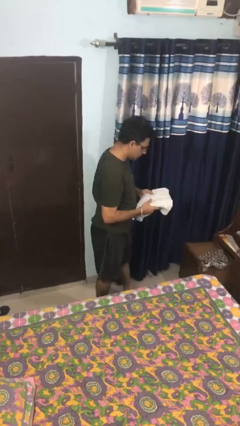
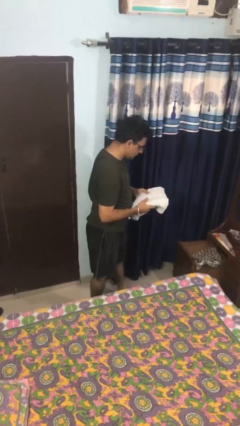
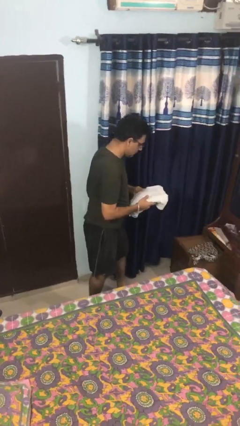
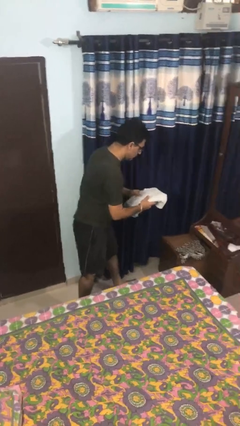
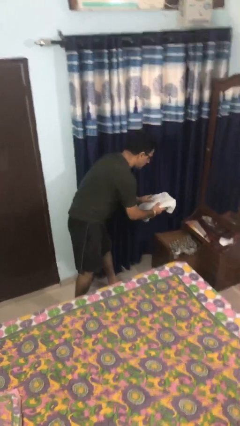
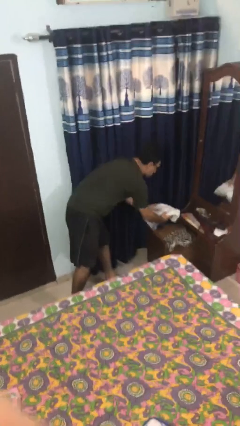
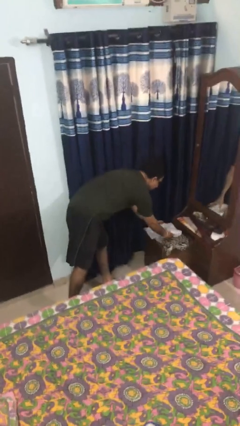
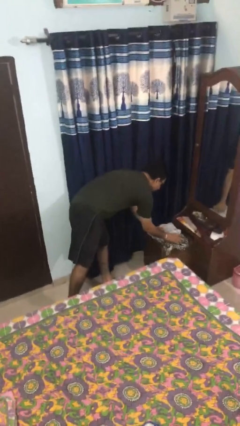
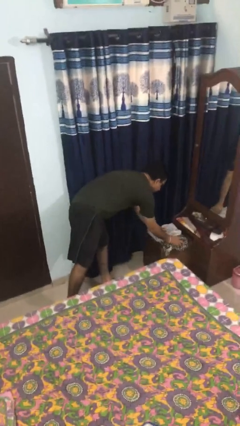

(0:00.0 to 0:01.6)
person puts clothes into dresser

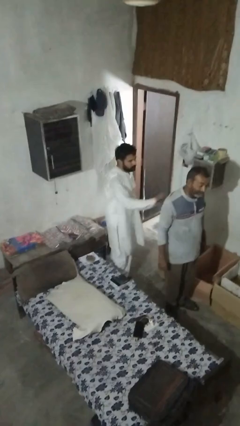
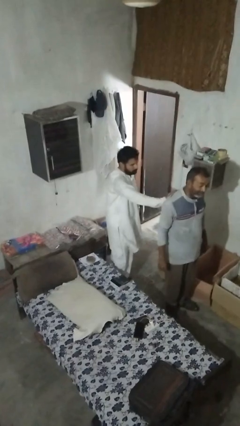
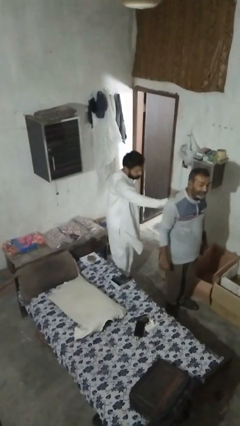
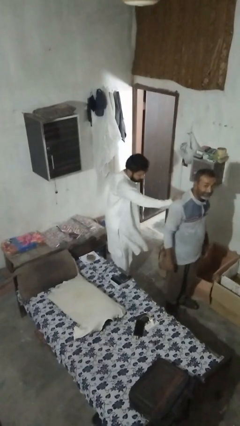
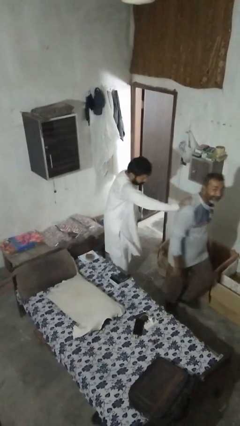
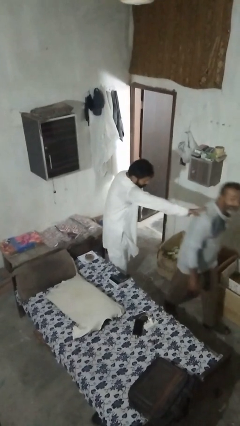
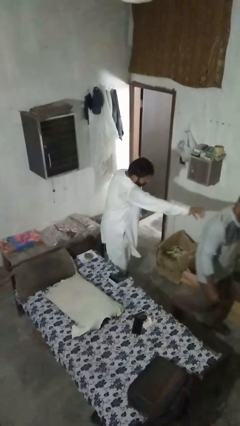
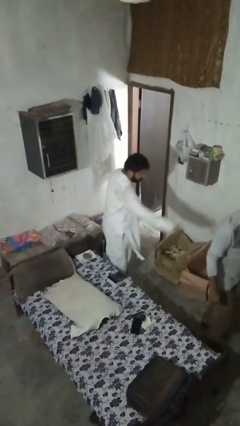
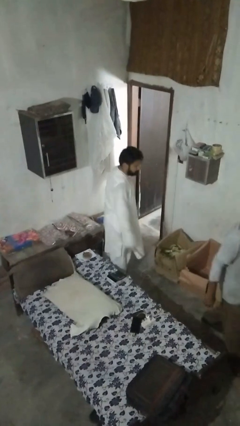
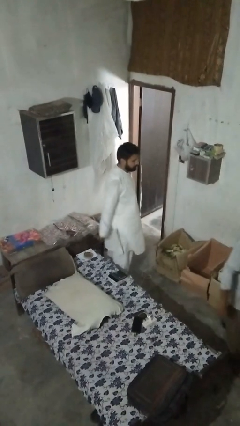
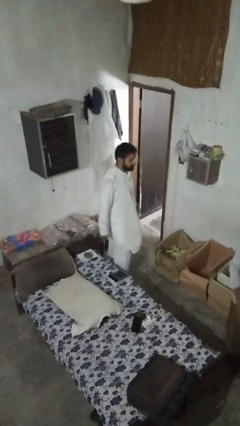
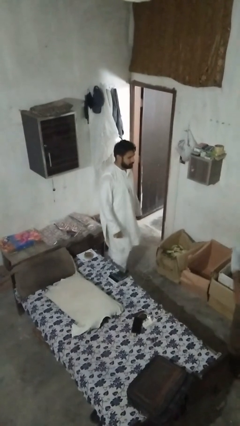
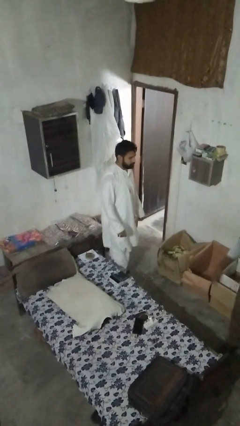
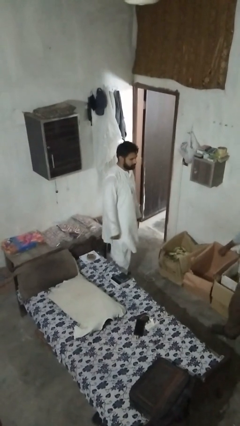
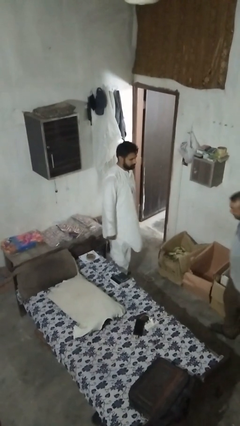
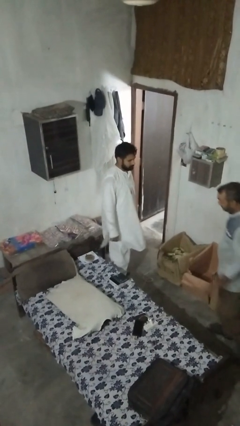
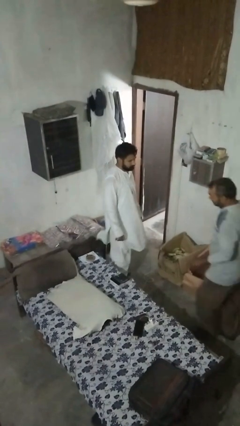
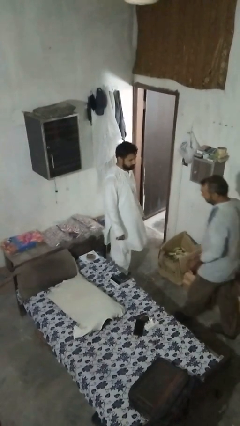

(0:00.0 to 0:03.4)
person shoves person

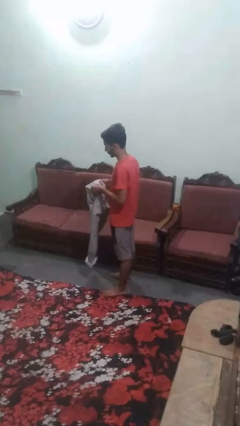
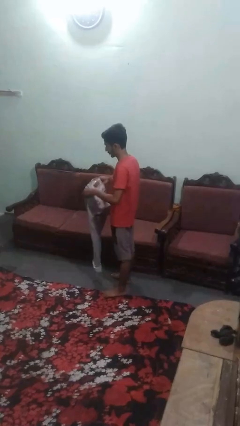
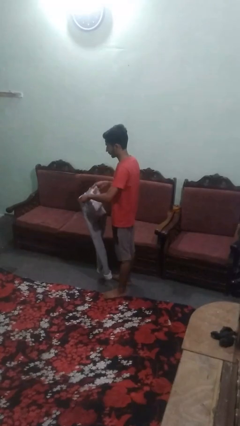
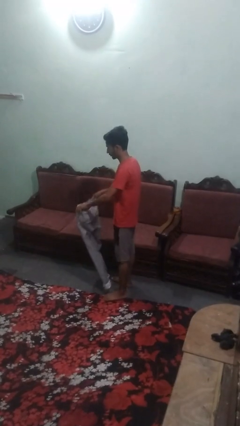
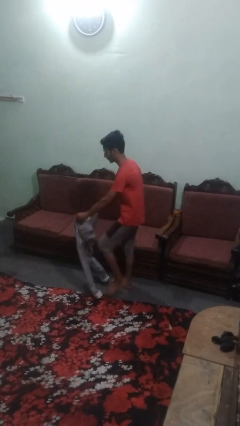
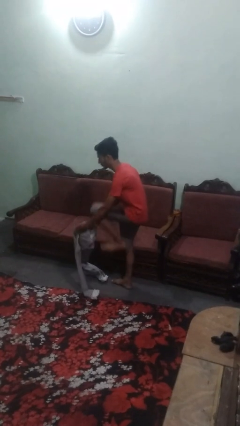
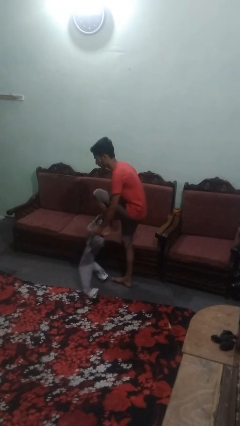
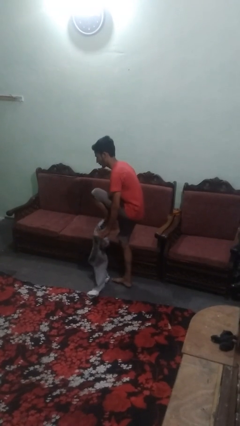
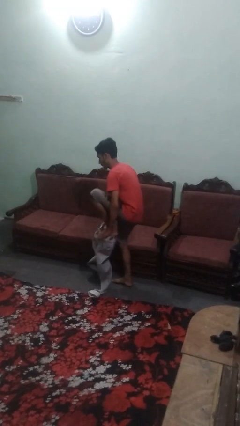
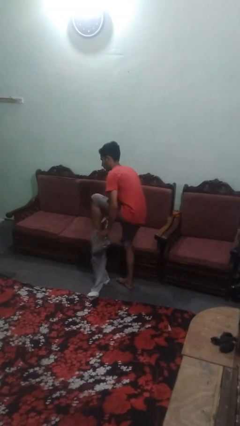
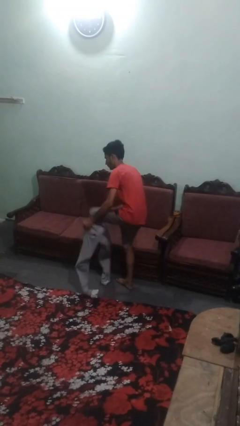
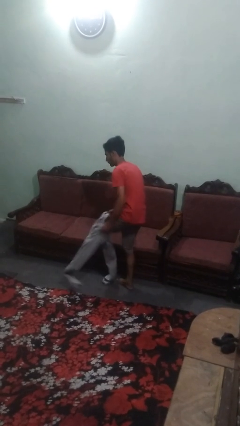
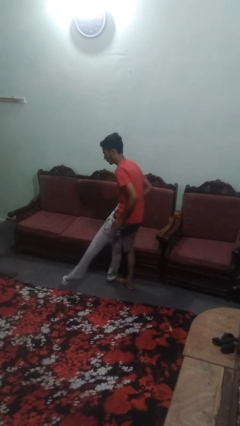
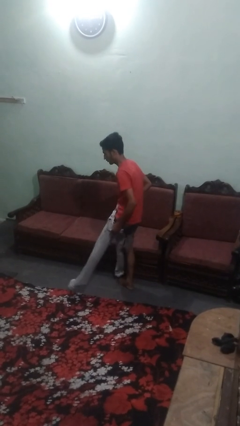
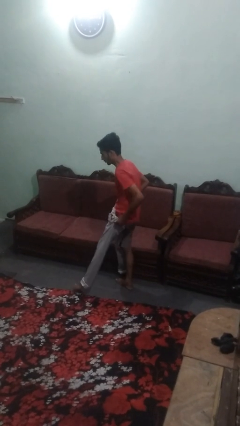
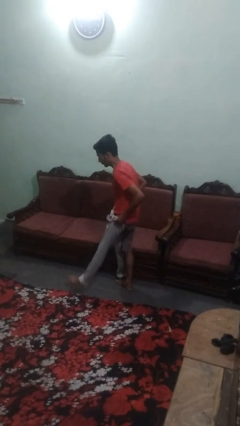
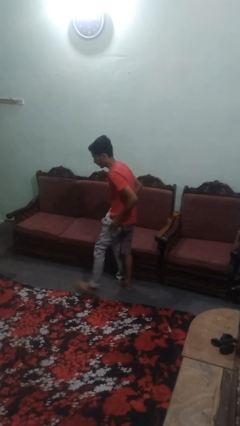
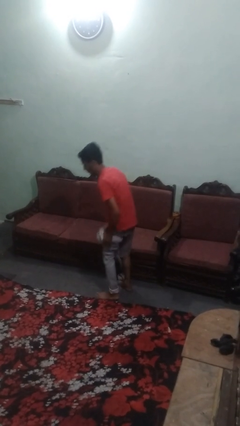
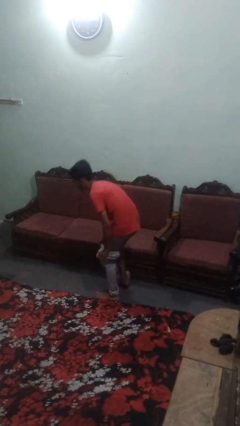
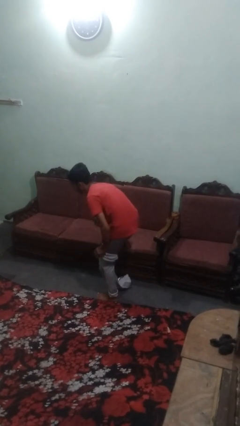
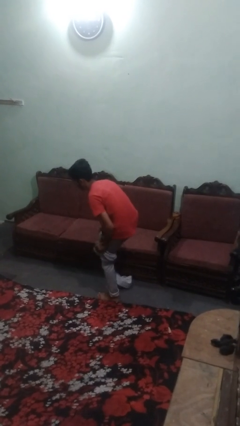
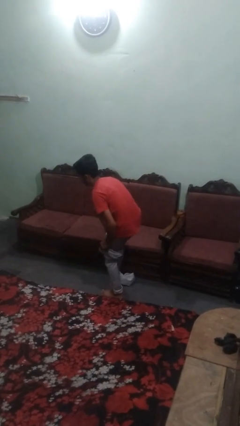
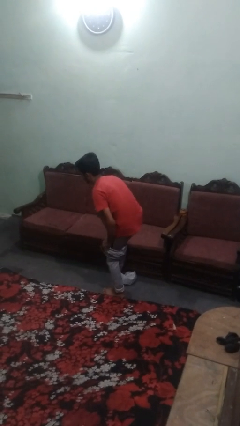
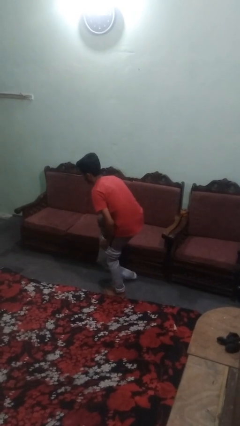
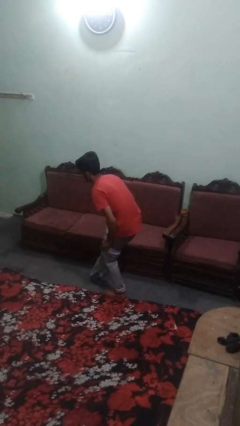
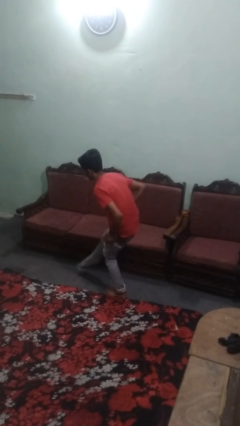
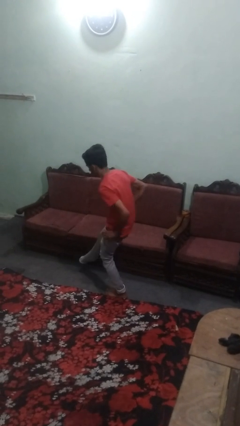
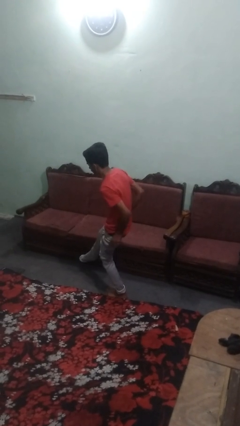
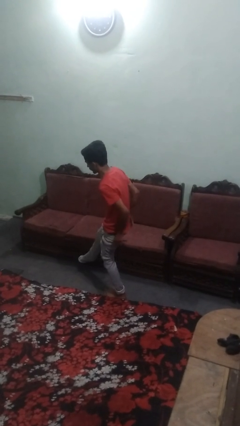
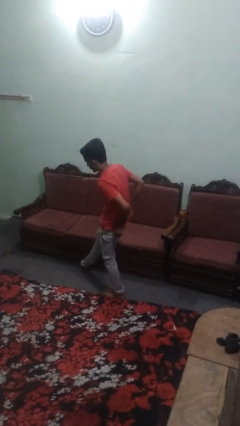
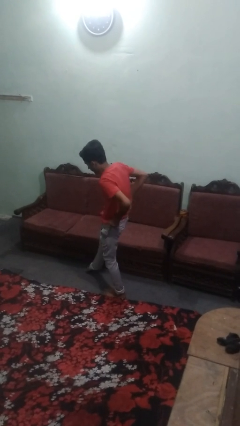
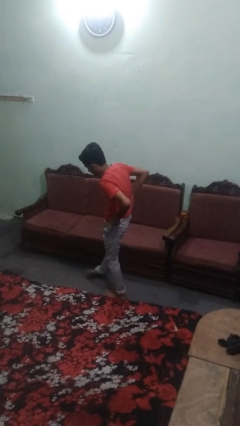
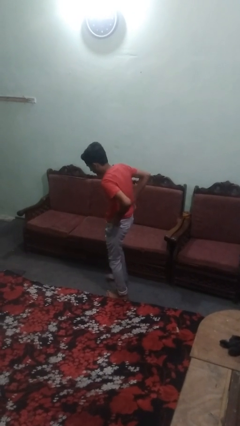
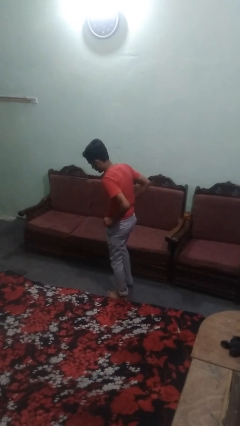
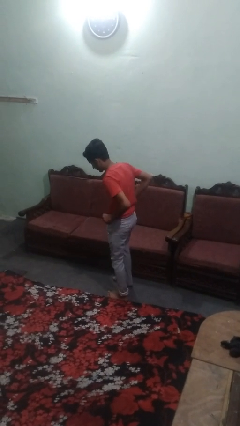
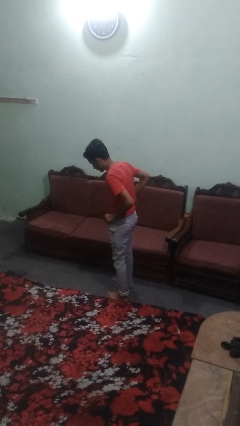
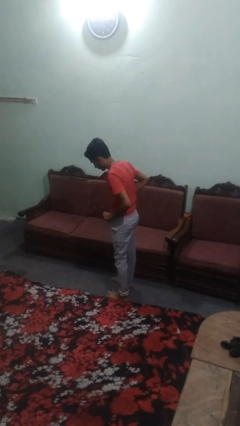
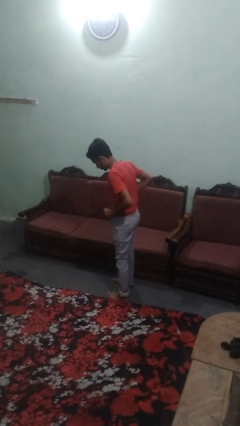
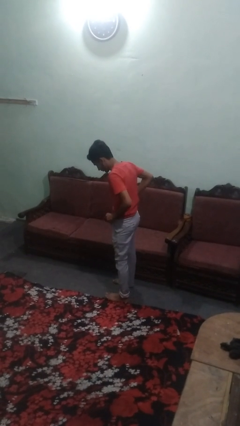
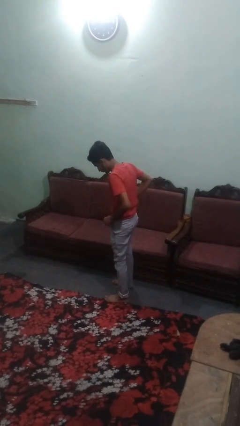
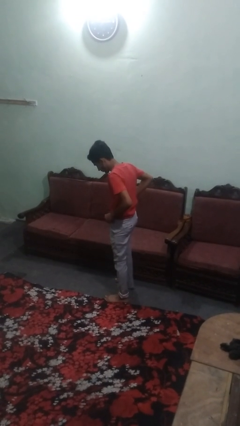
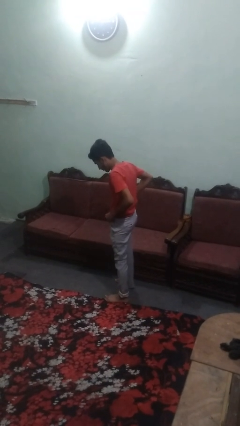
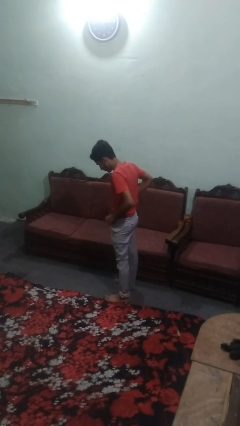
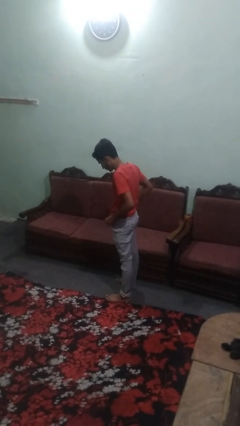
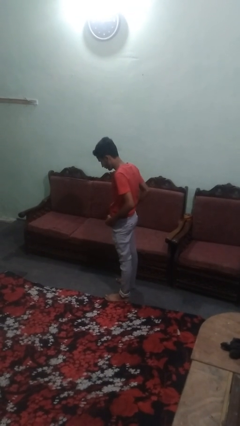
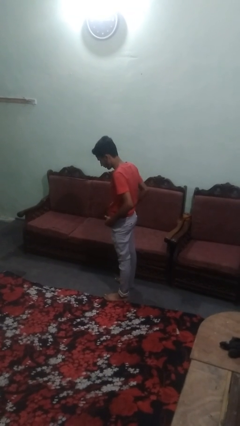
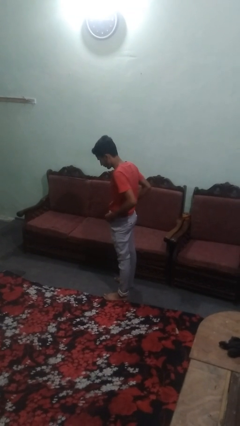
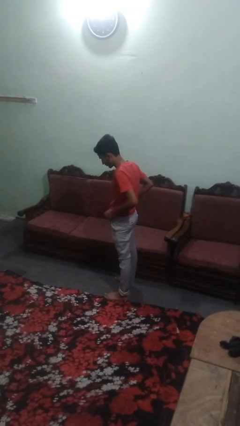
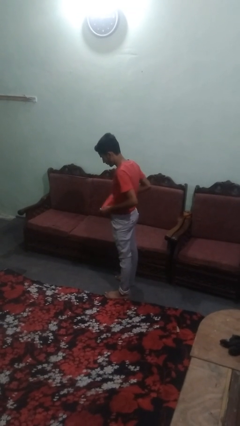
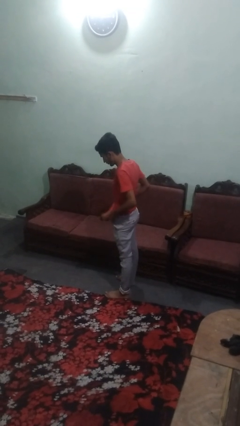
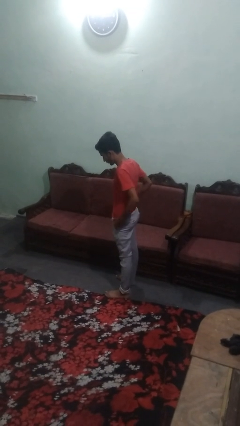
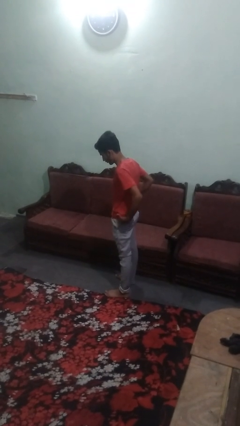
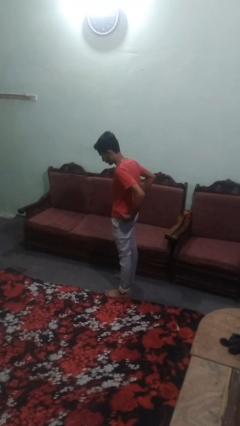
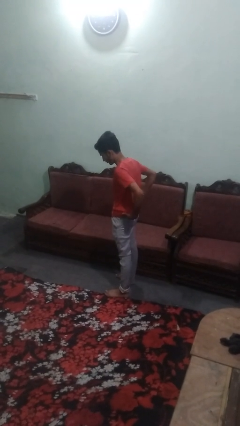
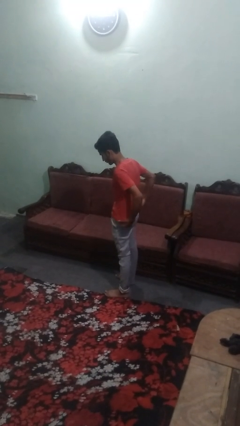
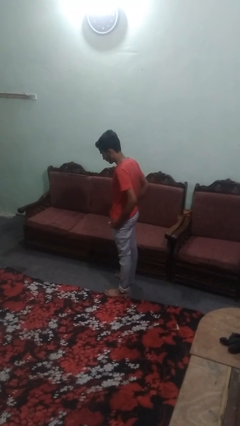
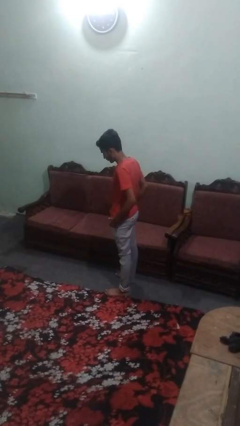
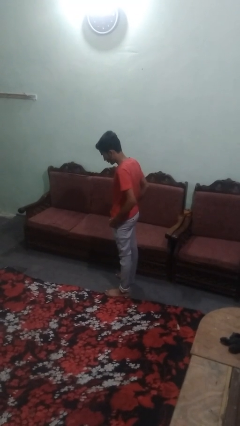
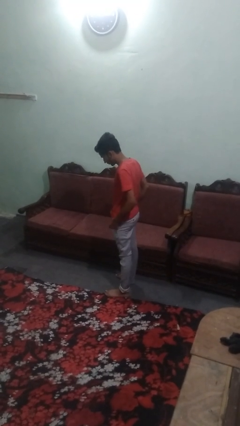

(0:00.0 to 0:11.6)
person takes off pants

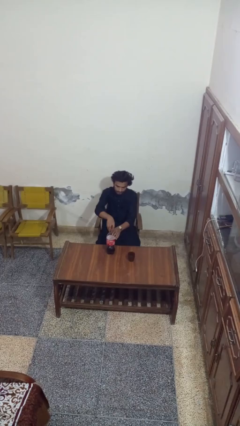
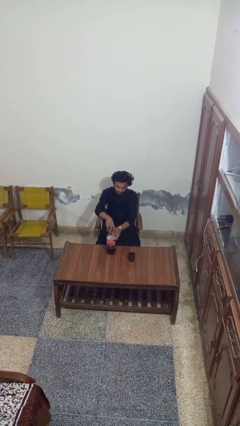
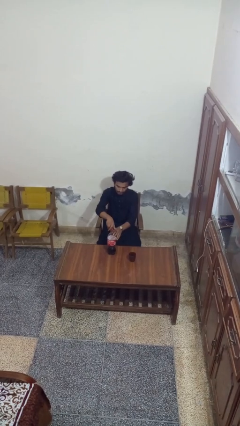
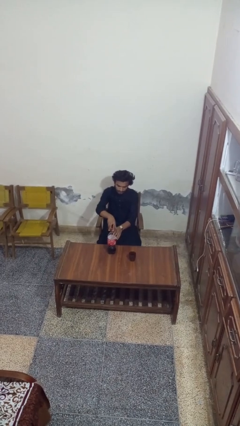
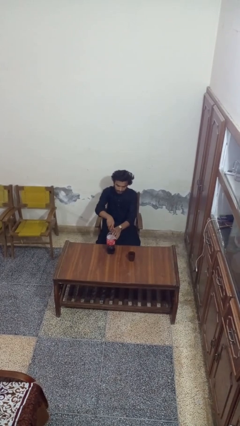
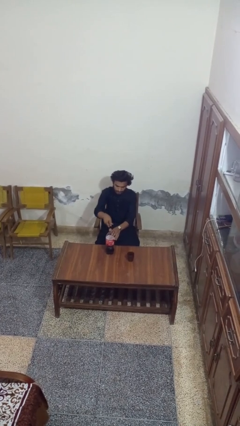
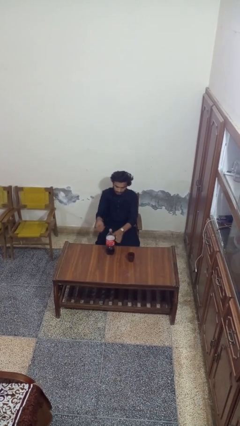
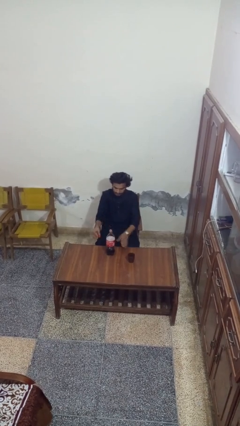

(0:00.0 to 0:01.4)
person unscrews lid from bottle
